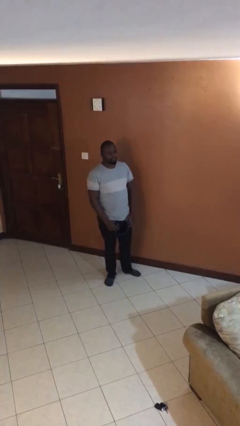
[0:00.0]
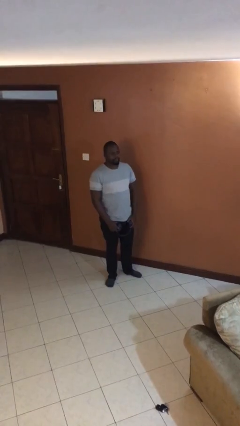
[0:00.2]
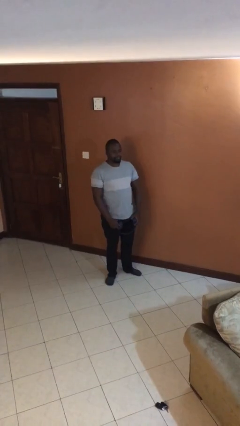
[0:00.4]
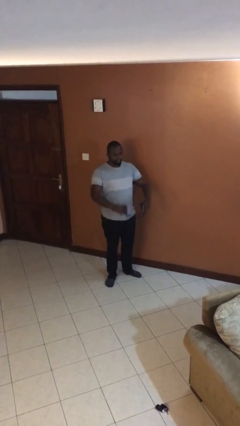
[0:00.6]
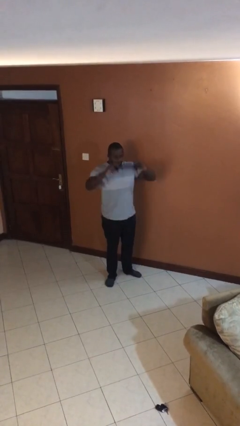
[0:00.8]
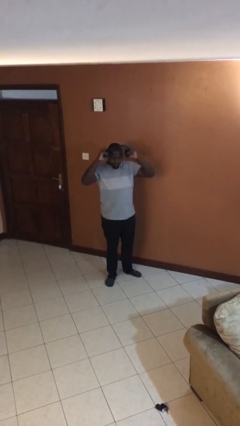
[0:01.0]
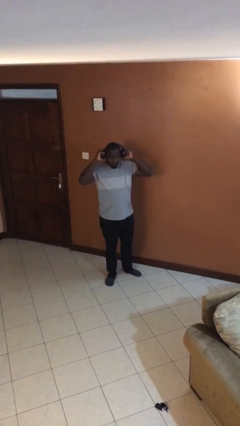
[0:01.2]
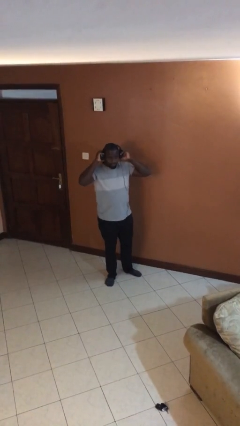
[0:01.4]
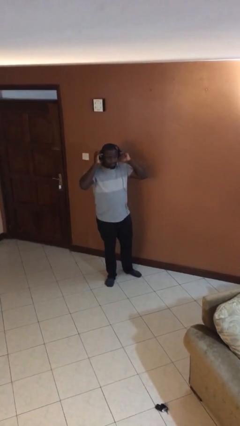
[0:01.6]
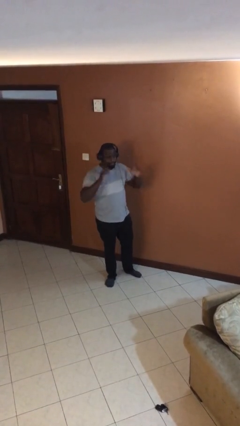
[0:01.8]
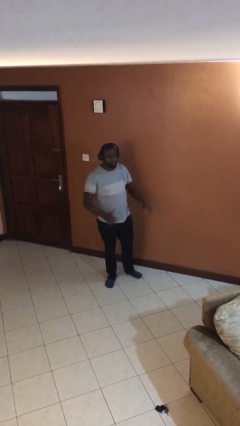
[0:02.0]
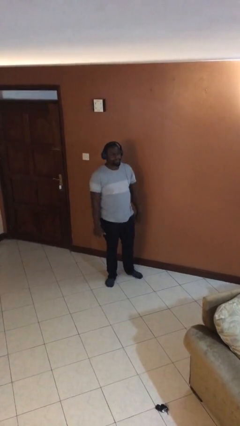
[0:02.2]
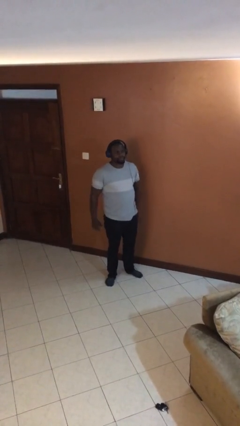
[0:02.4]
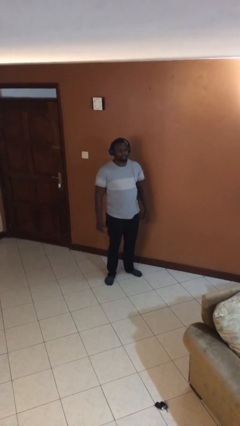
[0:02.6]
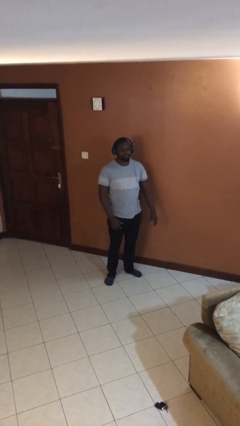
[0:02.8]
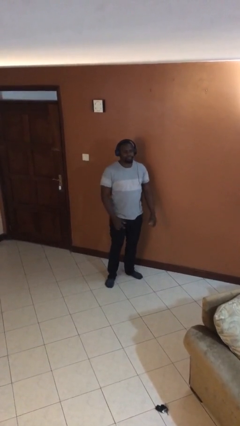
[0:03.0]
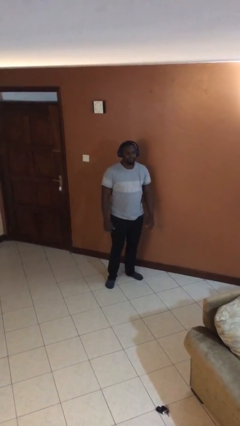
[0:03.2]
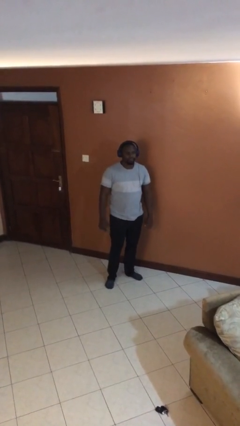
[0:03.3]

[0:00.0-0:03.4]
person puts on headphones

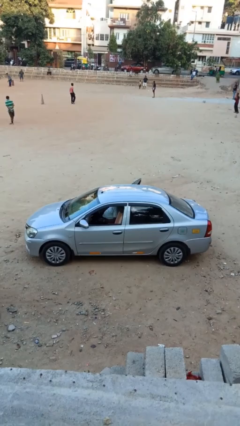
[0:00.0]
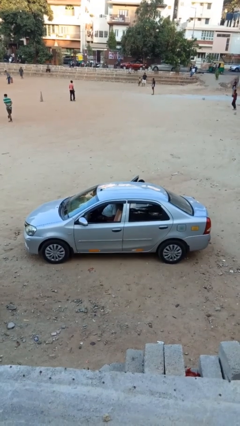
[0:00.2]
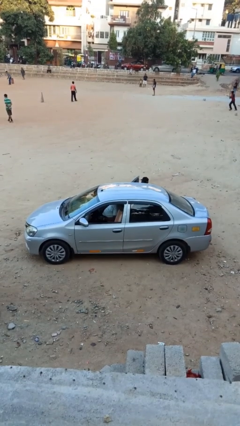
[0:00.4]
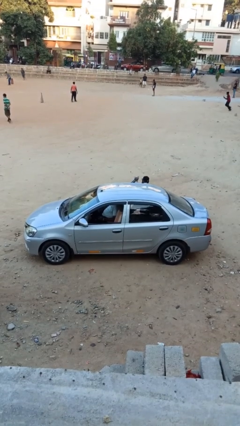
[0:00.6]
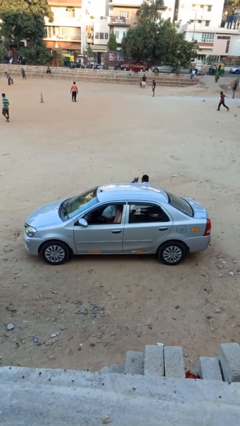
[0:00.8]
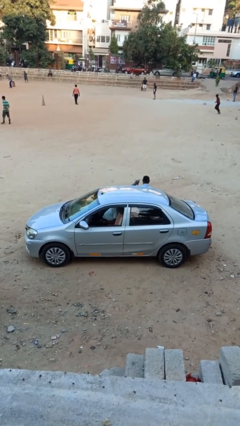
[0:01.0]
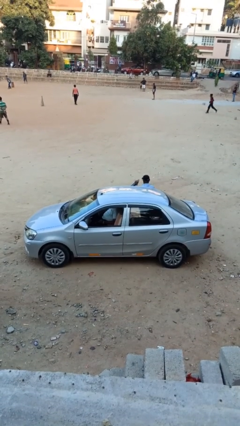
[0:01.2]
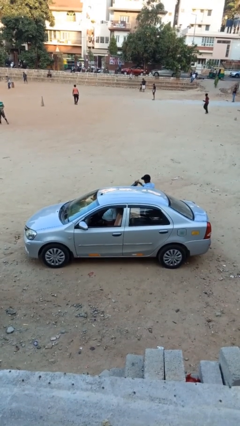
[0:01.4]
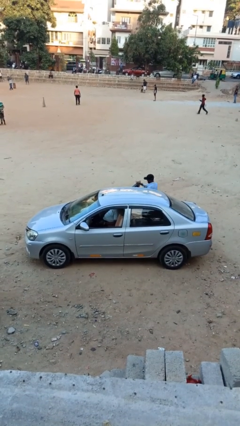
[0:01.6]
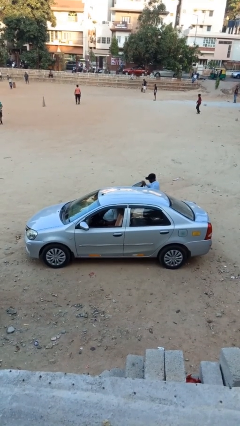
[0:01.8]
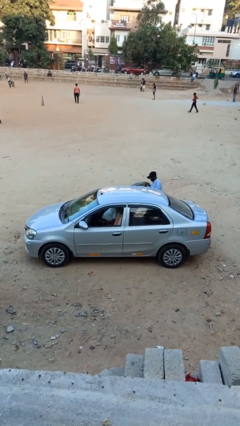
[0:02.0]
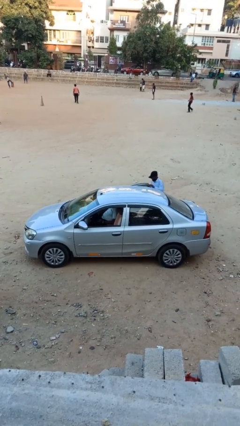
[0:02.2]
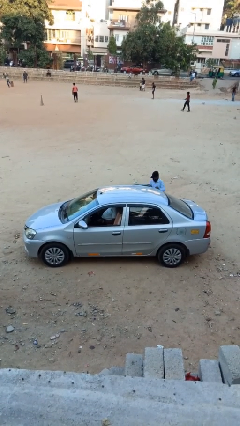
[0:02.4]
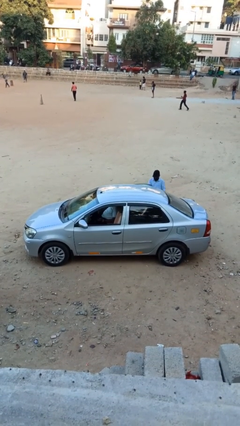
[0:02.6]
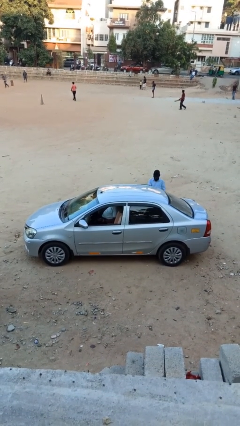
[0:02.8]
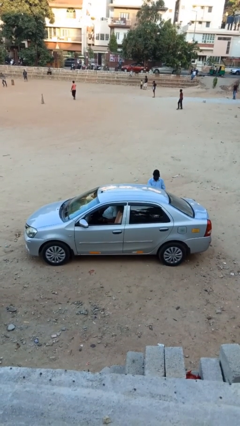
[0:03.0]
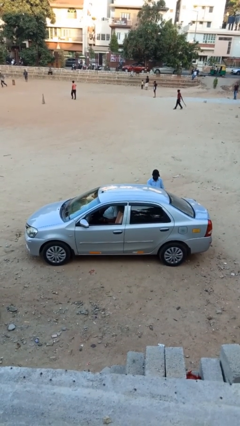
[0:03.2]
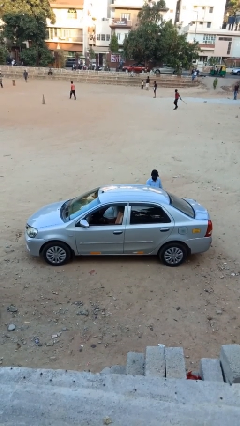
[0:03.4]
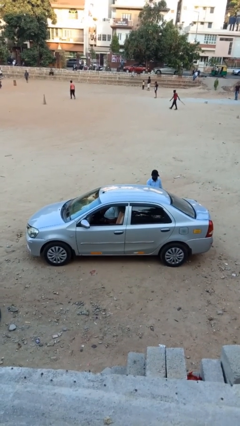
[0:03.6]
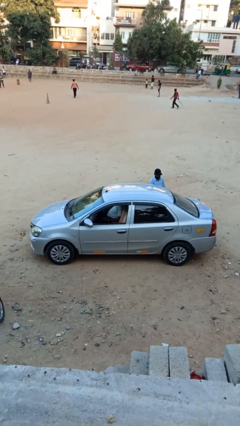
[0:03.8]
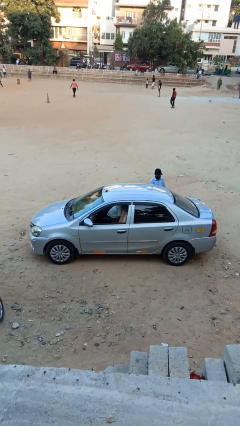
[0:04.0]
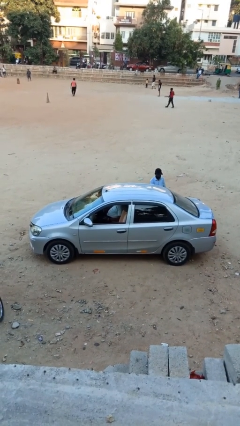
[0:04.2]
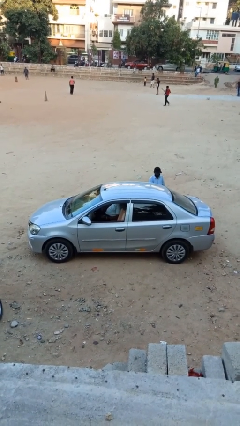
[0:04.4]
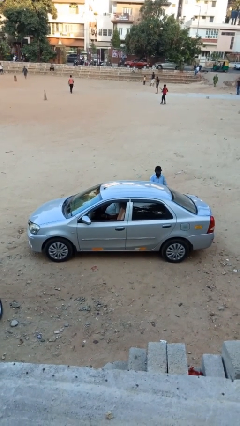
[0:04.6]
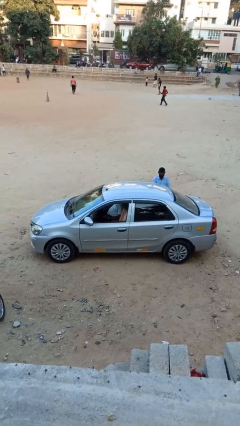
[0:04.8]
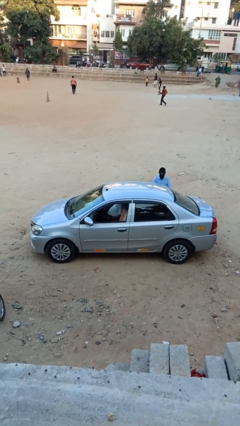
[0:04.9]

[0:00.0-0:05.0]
car drops off person

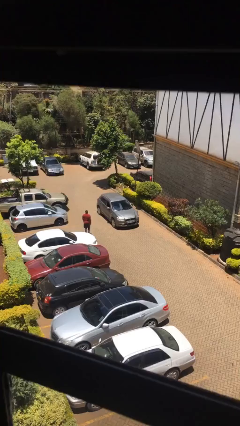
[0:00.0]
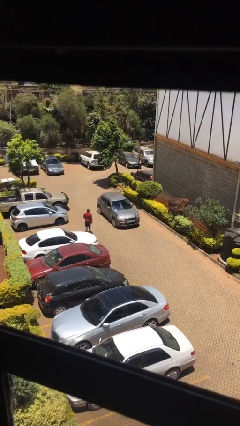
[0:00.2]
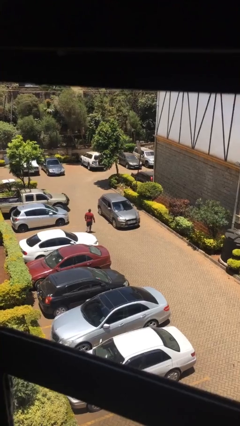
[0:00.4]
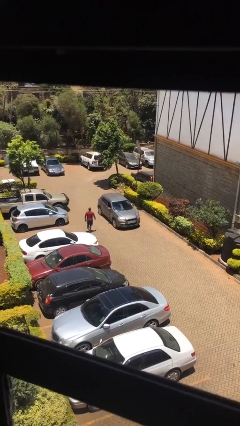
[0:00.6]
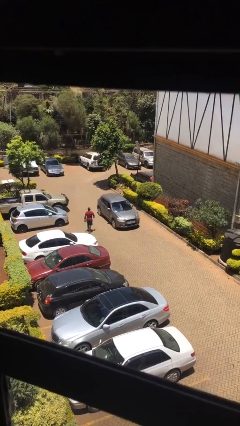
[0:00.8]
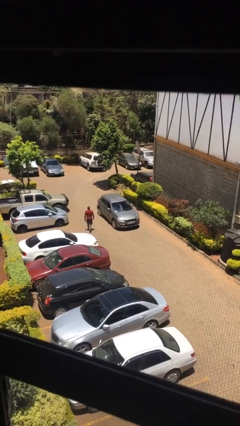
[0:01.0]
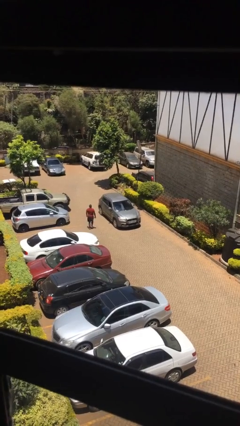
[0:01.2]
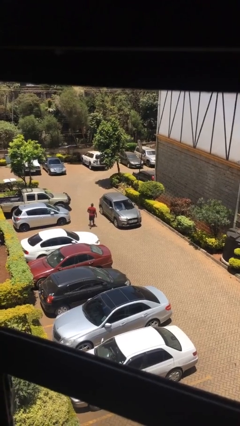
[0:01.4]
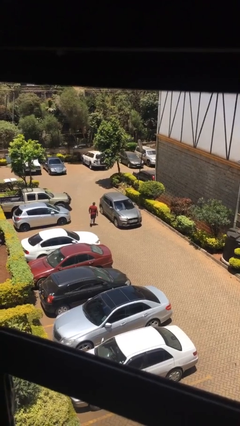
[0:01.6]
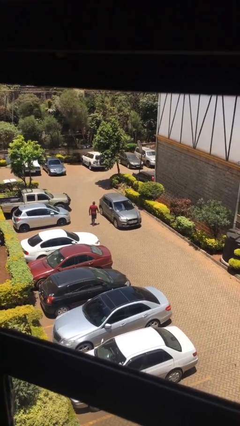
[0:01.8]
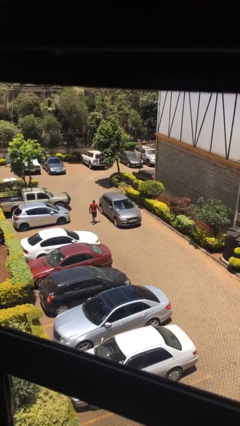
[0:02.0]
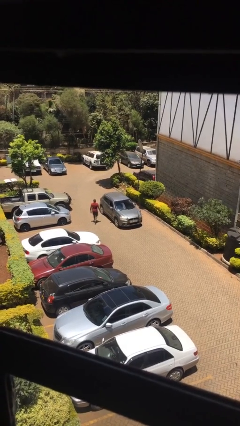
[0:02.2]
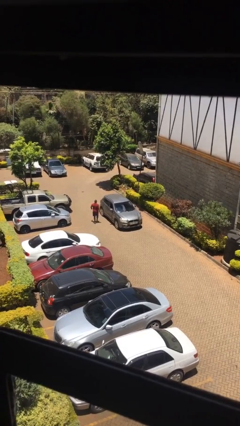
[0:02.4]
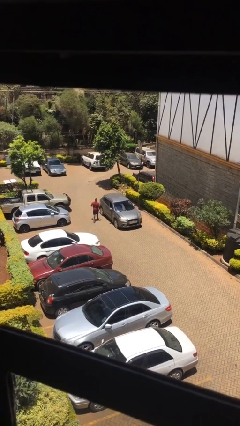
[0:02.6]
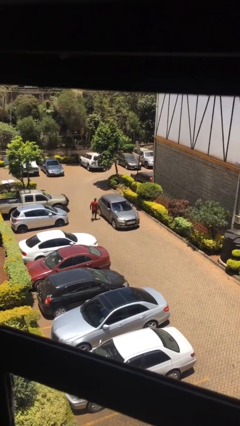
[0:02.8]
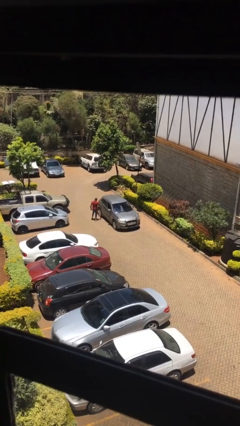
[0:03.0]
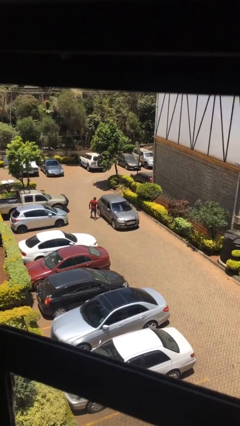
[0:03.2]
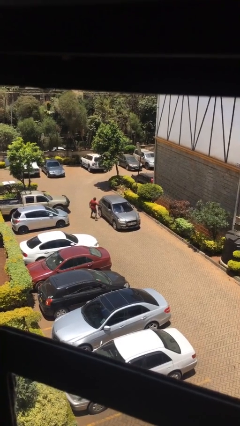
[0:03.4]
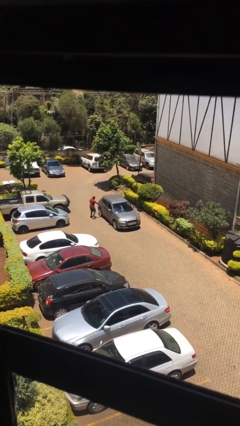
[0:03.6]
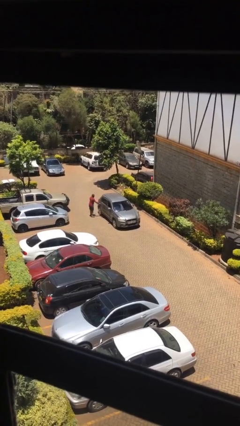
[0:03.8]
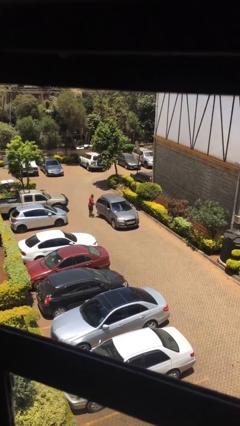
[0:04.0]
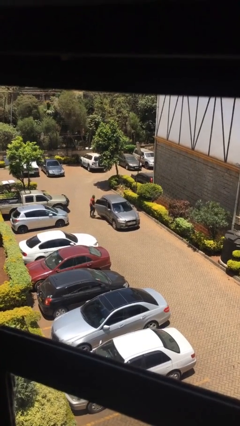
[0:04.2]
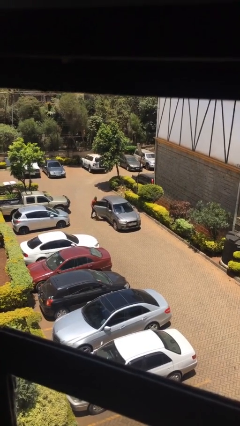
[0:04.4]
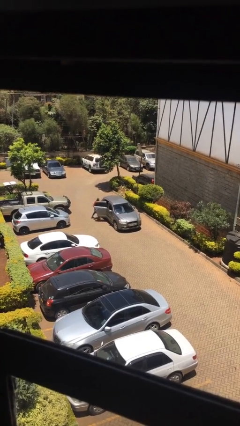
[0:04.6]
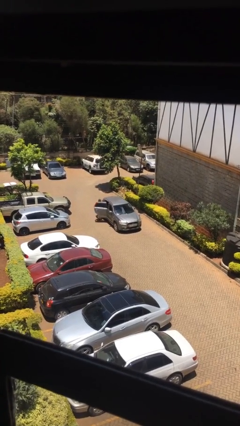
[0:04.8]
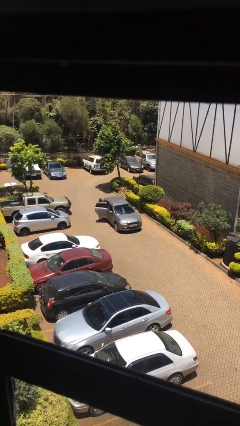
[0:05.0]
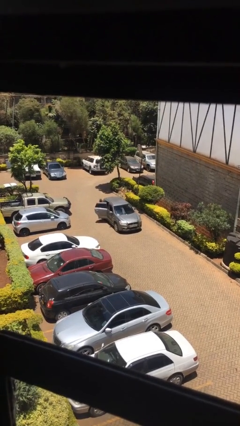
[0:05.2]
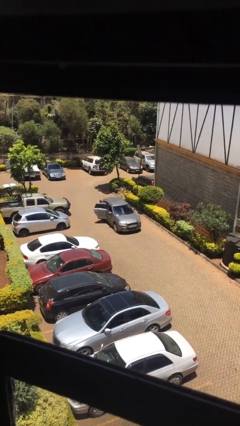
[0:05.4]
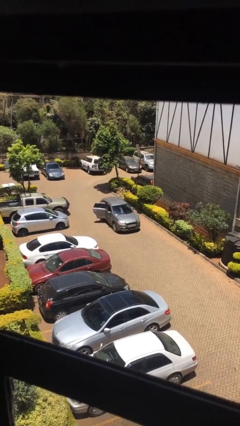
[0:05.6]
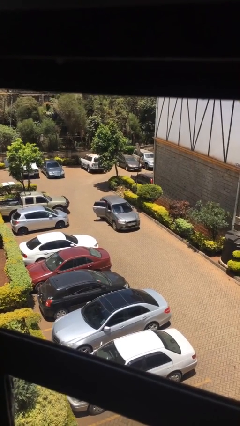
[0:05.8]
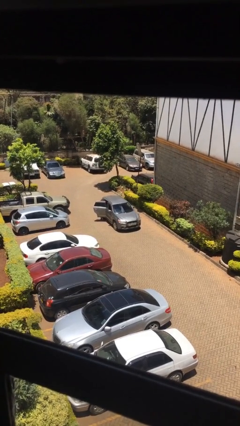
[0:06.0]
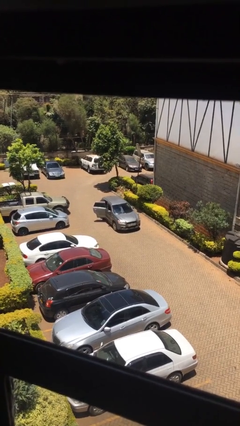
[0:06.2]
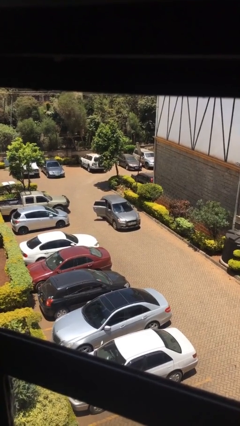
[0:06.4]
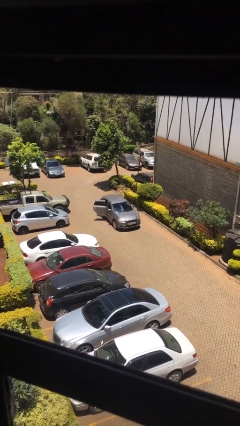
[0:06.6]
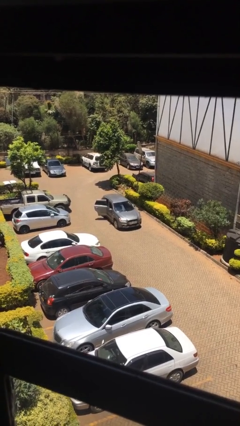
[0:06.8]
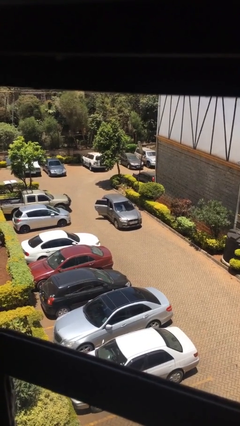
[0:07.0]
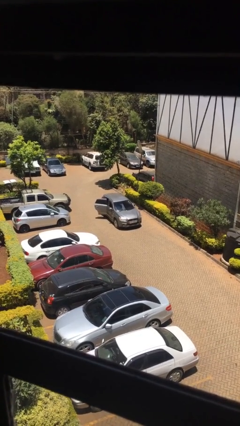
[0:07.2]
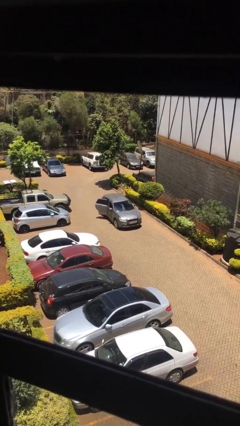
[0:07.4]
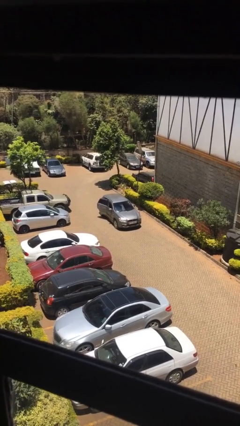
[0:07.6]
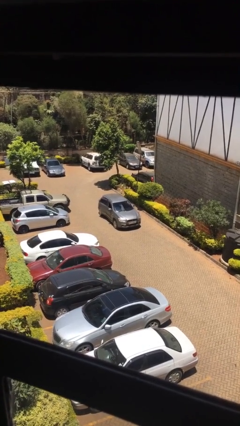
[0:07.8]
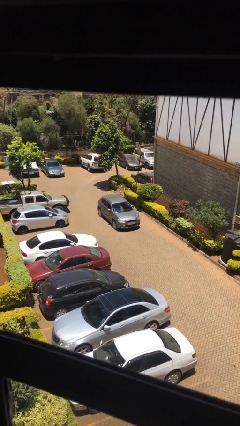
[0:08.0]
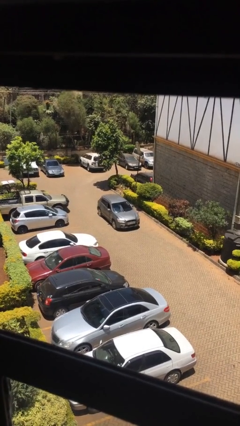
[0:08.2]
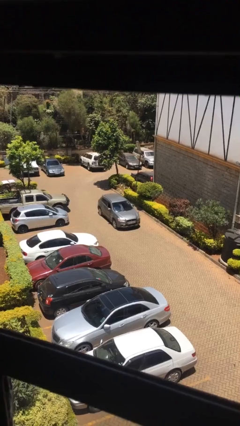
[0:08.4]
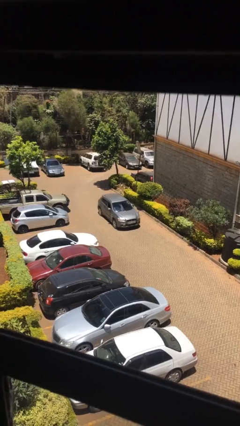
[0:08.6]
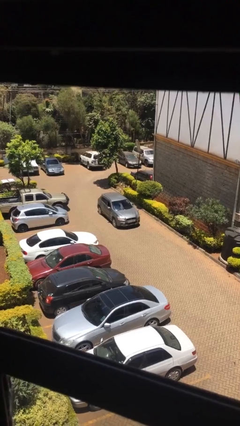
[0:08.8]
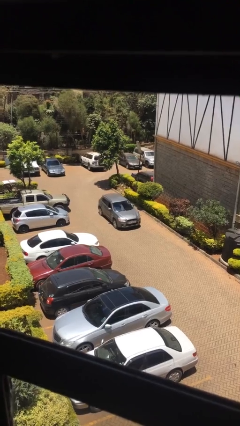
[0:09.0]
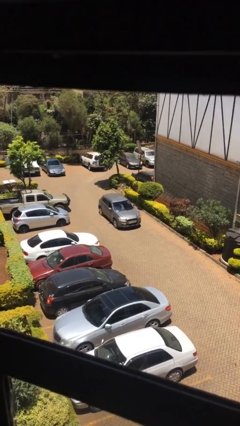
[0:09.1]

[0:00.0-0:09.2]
car picks up person
